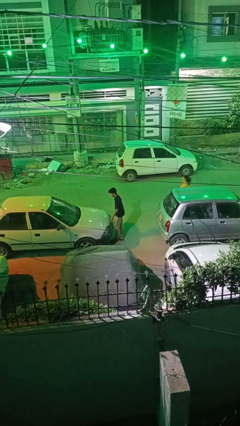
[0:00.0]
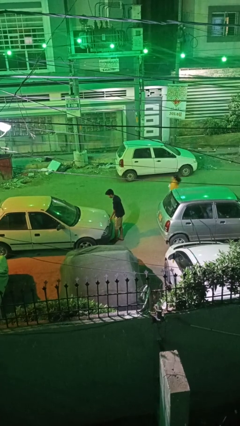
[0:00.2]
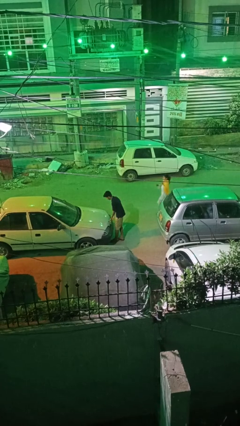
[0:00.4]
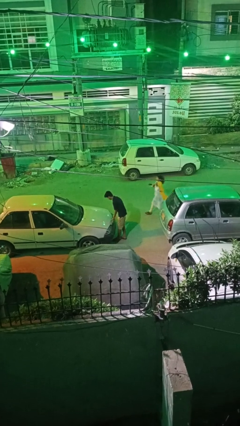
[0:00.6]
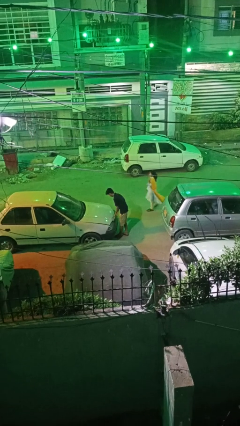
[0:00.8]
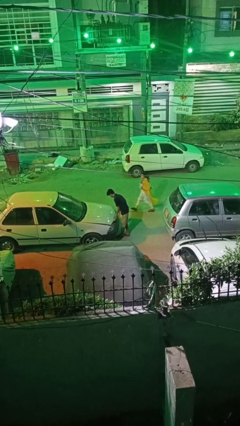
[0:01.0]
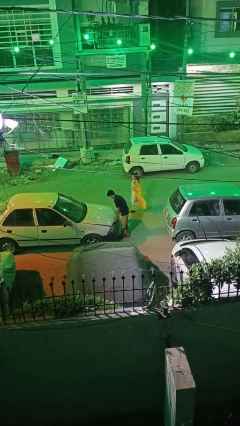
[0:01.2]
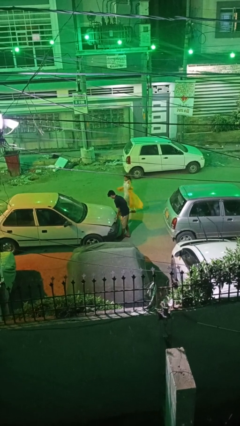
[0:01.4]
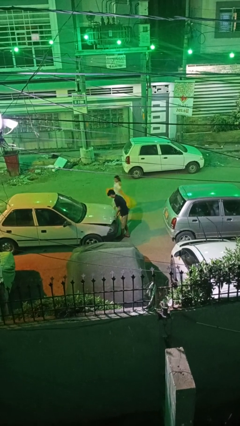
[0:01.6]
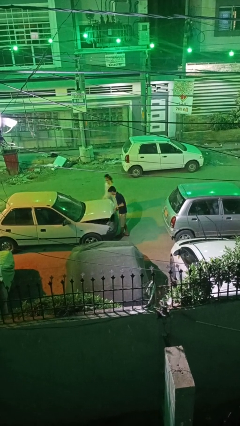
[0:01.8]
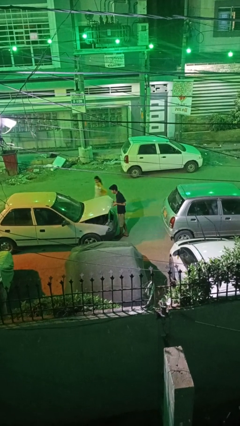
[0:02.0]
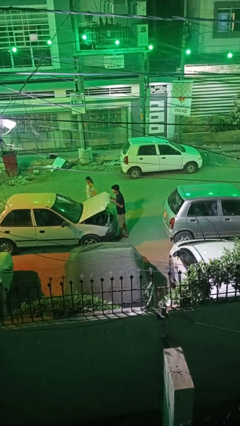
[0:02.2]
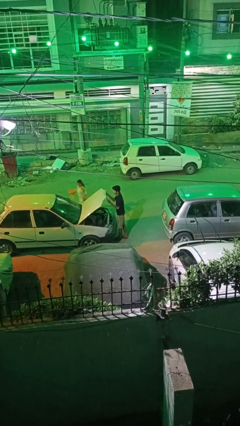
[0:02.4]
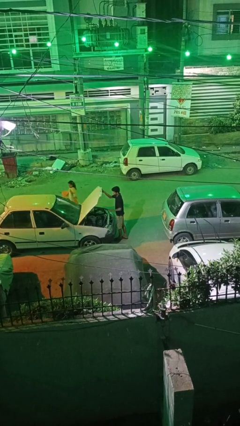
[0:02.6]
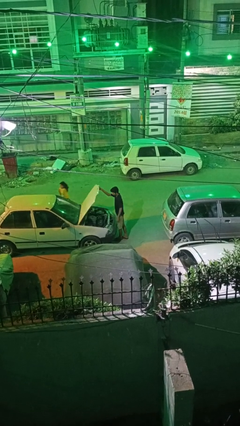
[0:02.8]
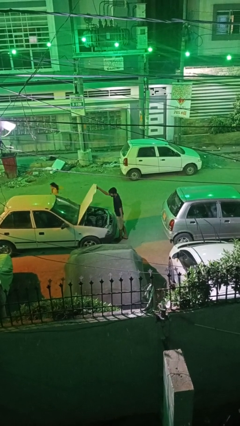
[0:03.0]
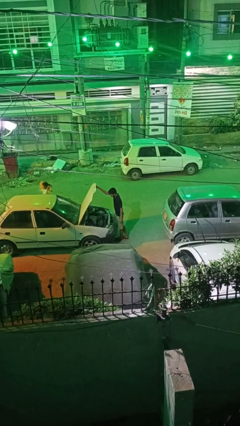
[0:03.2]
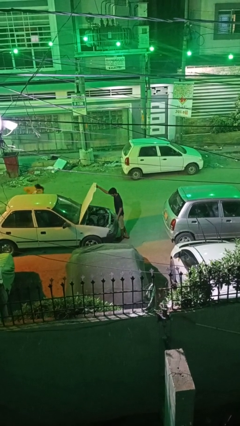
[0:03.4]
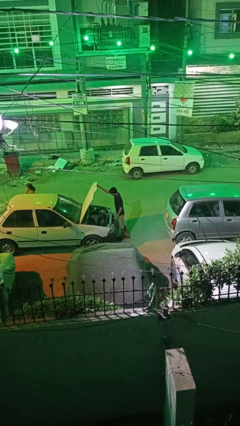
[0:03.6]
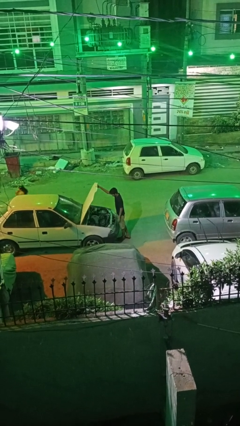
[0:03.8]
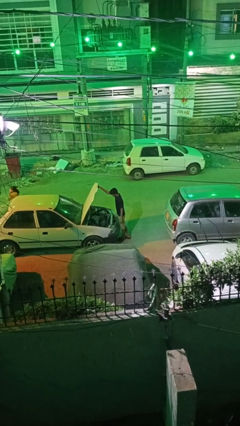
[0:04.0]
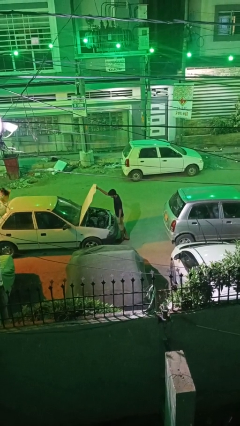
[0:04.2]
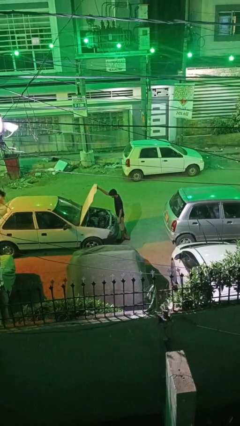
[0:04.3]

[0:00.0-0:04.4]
person opens car hood

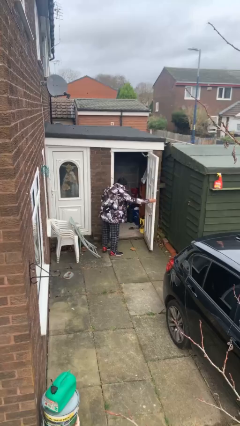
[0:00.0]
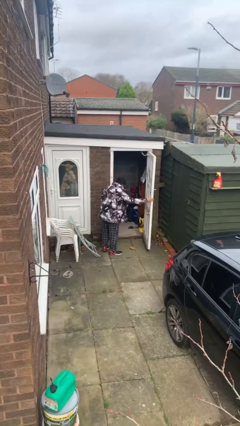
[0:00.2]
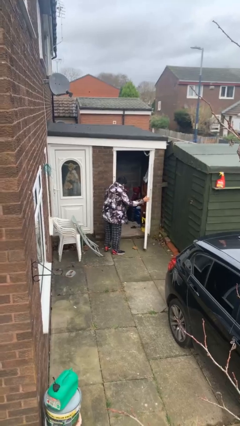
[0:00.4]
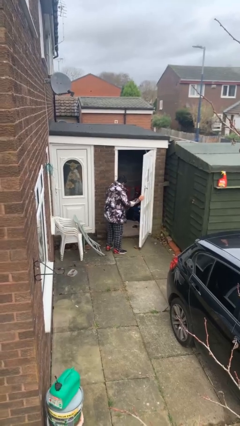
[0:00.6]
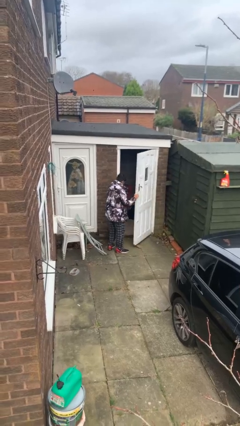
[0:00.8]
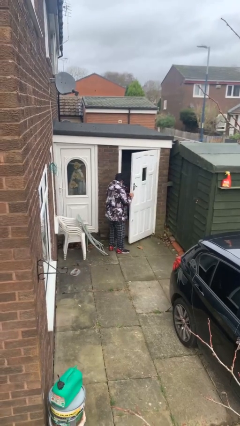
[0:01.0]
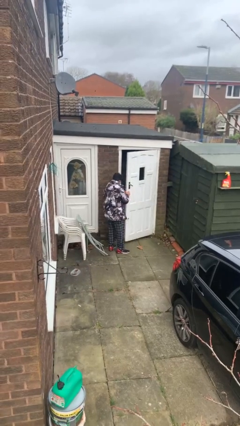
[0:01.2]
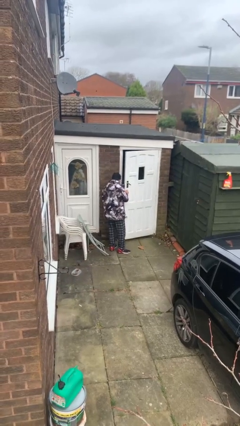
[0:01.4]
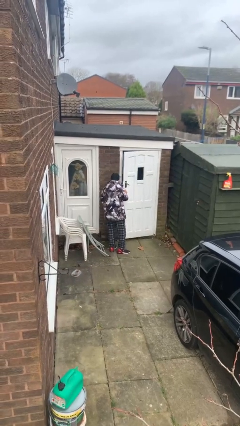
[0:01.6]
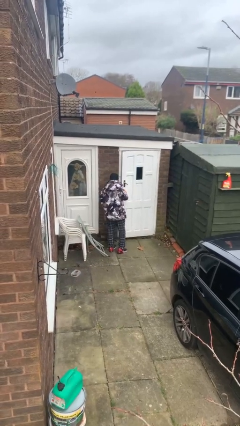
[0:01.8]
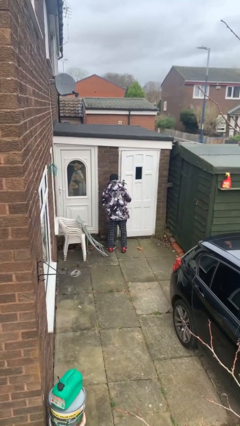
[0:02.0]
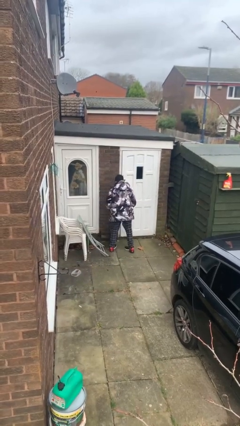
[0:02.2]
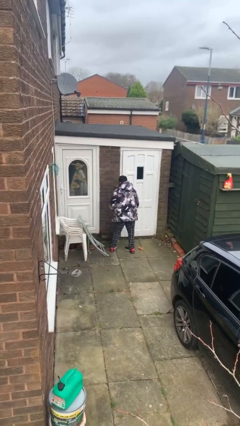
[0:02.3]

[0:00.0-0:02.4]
person closes facility door

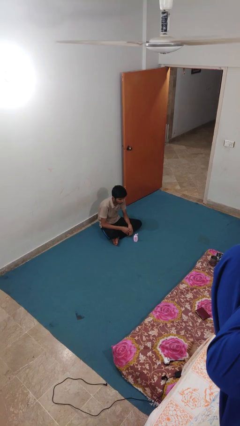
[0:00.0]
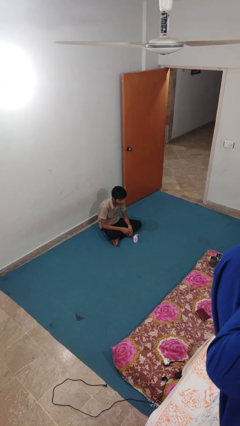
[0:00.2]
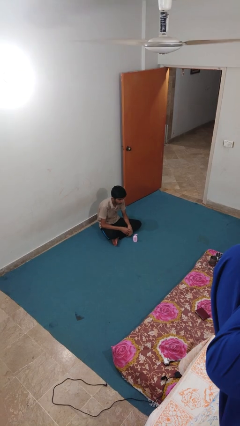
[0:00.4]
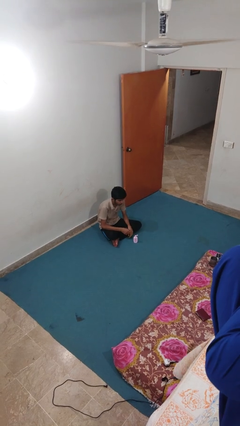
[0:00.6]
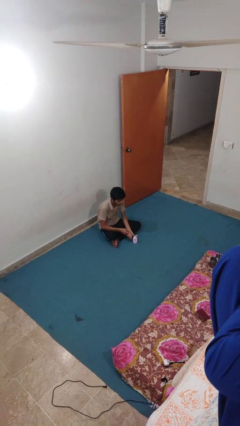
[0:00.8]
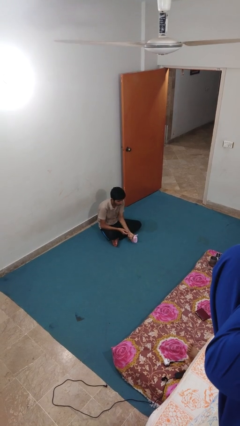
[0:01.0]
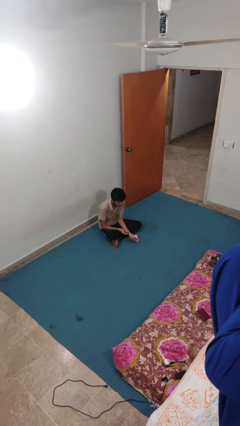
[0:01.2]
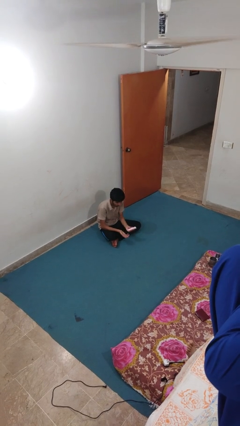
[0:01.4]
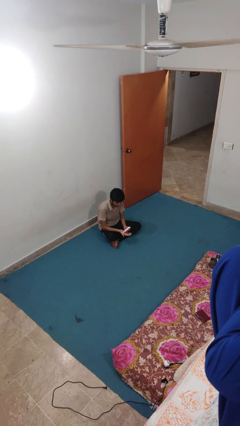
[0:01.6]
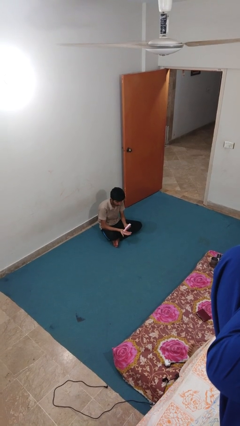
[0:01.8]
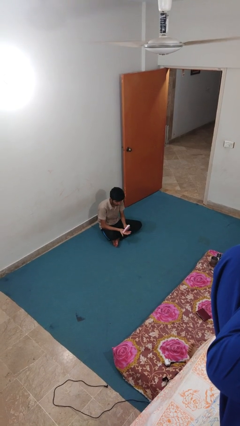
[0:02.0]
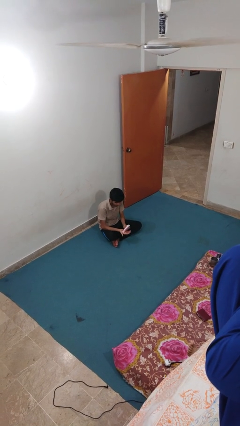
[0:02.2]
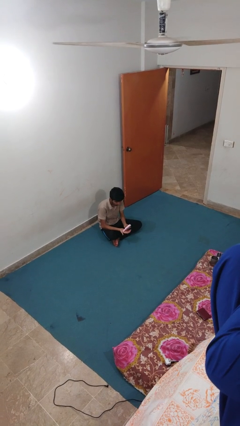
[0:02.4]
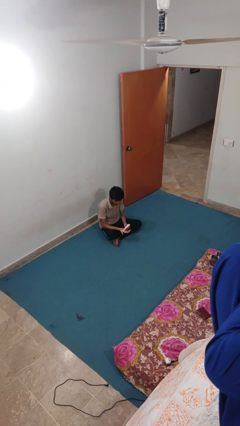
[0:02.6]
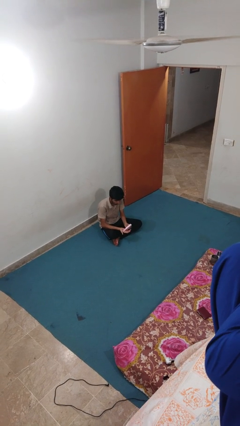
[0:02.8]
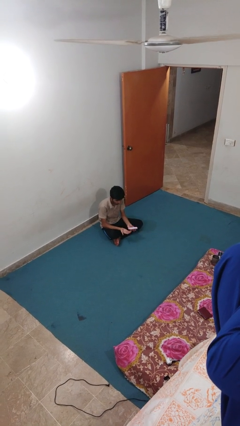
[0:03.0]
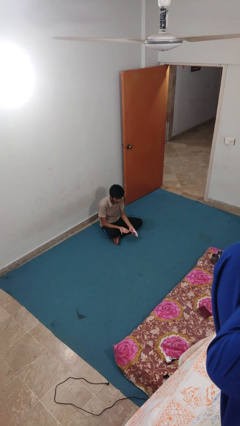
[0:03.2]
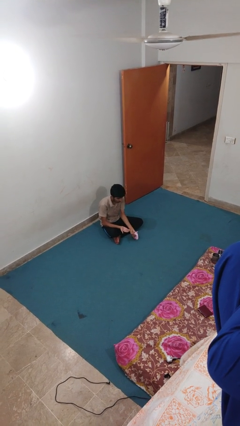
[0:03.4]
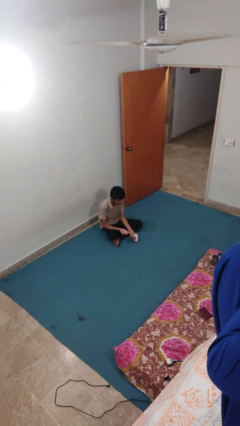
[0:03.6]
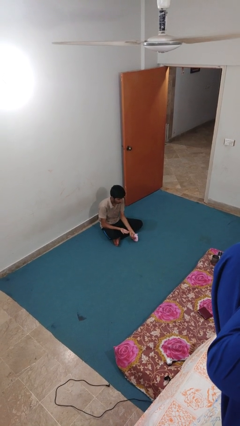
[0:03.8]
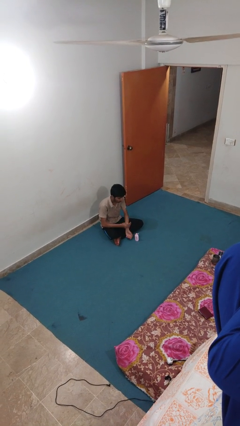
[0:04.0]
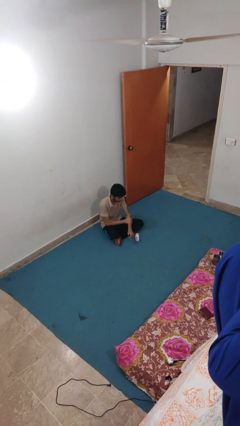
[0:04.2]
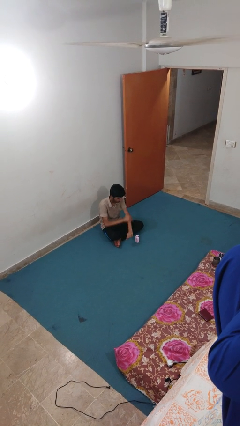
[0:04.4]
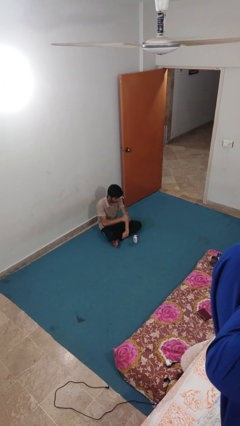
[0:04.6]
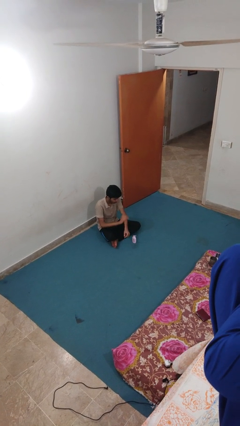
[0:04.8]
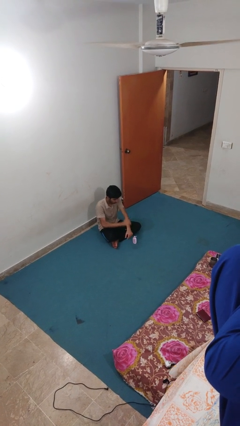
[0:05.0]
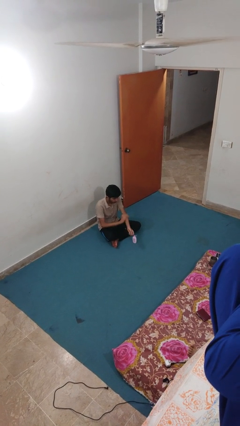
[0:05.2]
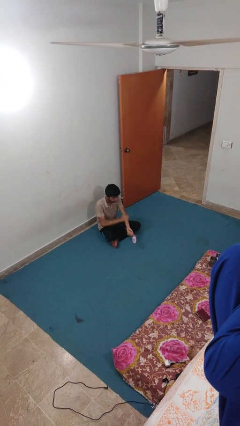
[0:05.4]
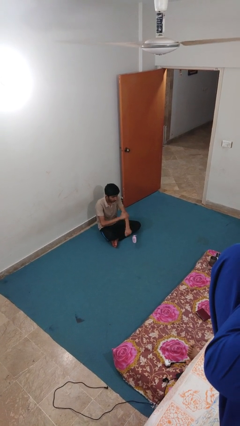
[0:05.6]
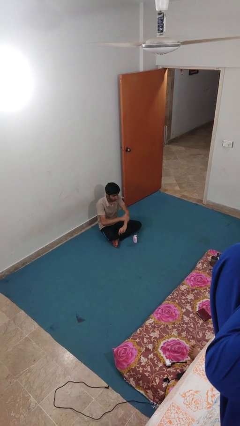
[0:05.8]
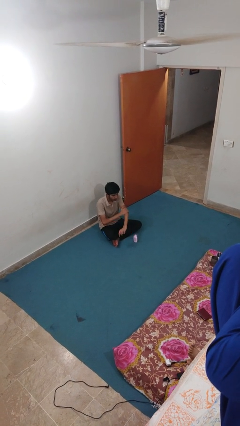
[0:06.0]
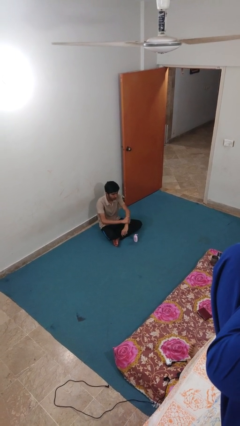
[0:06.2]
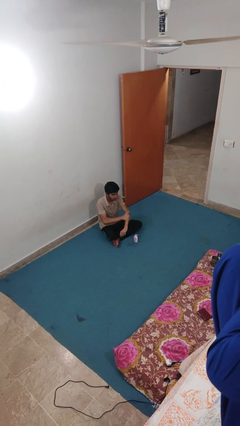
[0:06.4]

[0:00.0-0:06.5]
person applies sunscreen

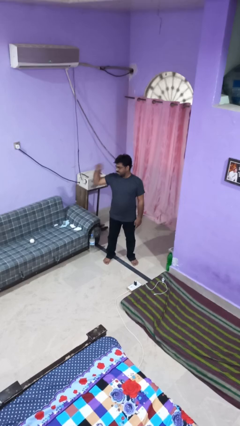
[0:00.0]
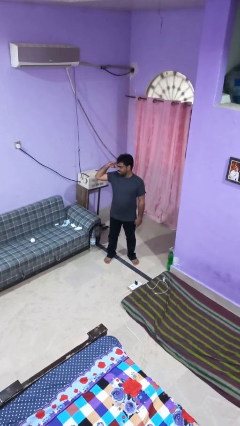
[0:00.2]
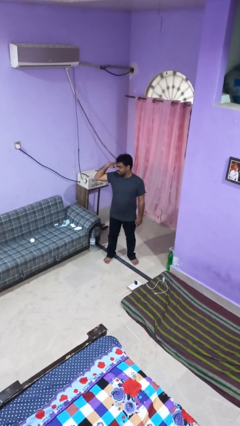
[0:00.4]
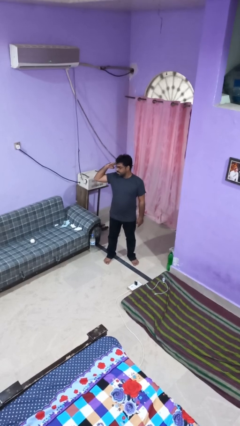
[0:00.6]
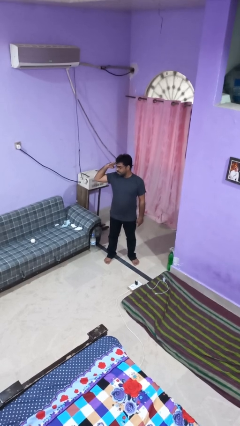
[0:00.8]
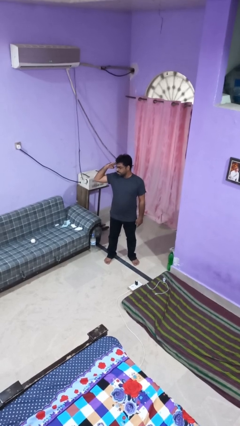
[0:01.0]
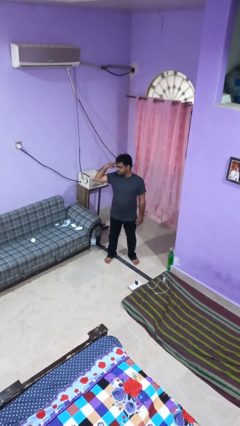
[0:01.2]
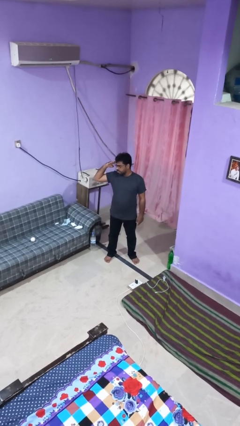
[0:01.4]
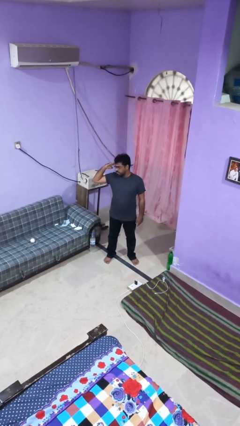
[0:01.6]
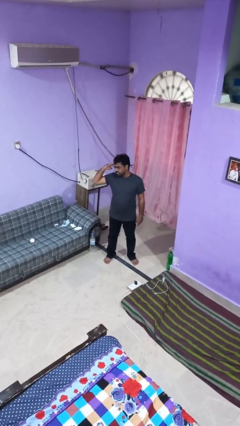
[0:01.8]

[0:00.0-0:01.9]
person salutes

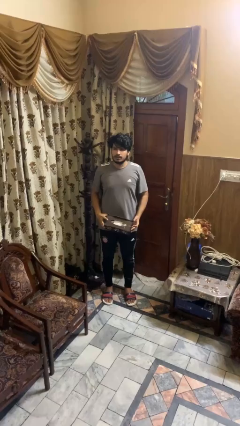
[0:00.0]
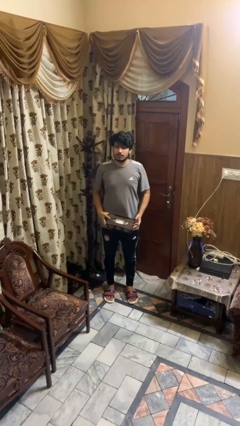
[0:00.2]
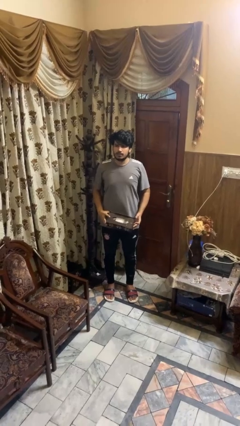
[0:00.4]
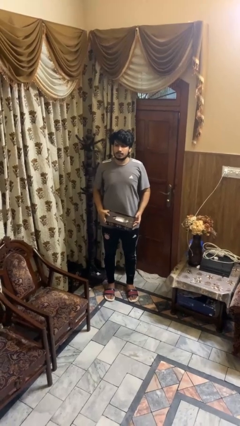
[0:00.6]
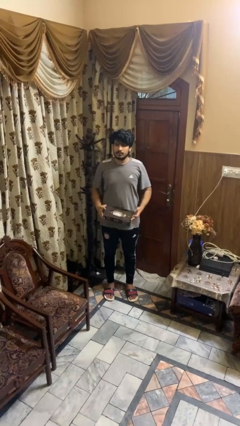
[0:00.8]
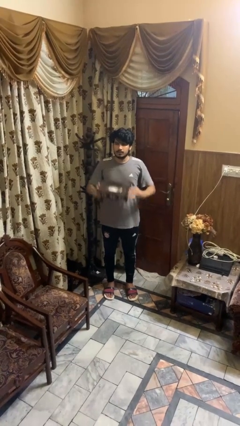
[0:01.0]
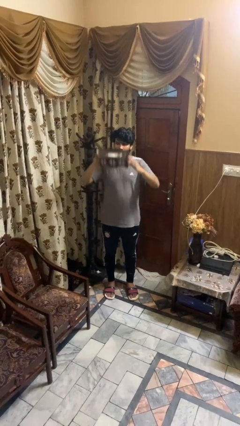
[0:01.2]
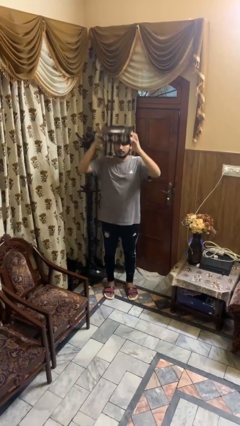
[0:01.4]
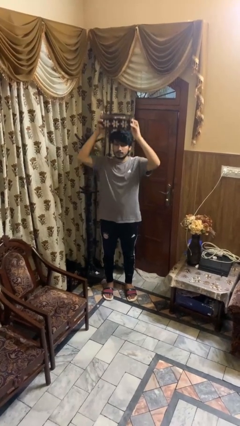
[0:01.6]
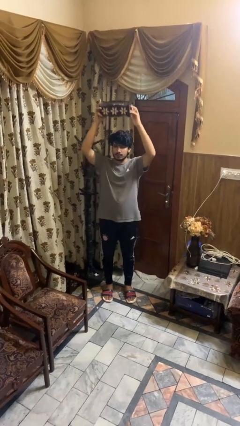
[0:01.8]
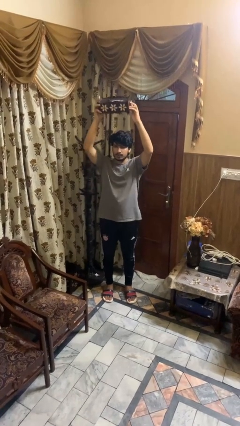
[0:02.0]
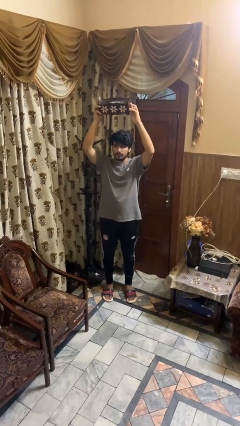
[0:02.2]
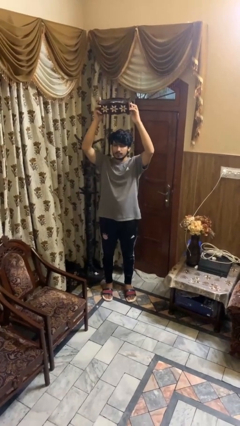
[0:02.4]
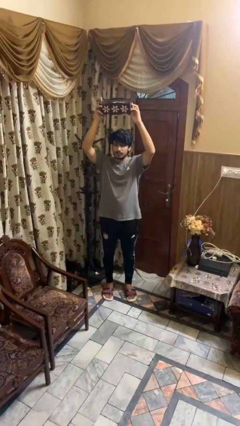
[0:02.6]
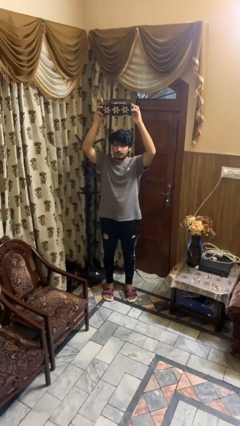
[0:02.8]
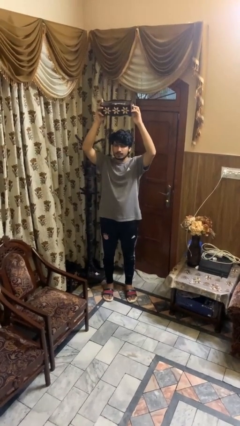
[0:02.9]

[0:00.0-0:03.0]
person holds object above head
